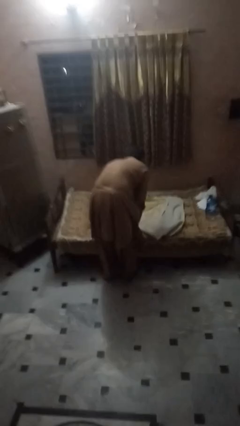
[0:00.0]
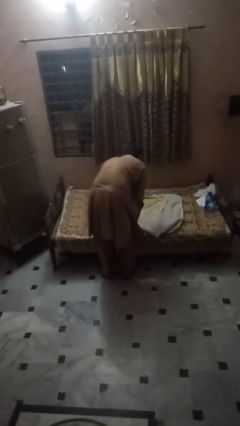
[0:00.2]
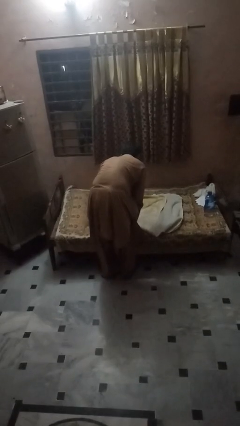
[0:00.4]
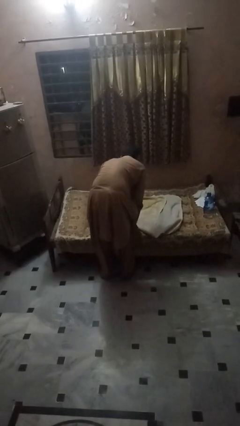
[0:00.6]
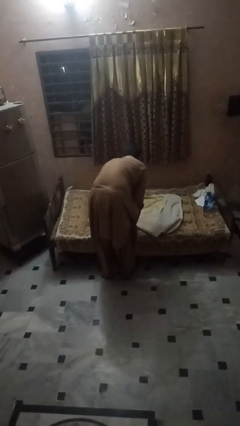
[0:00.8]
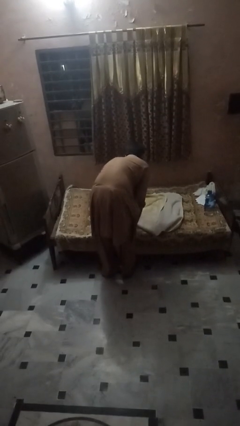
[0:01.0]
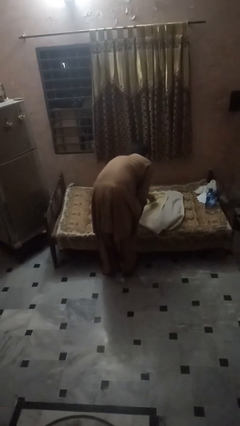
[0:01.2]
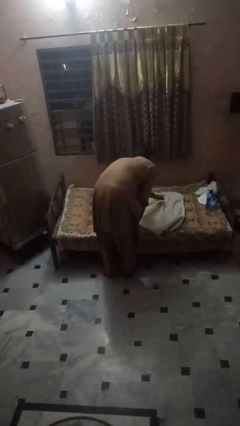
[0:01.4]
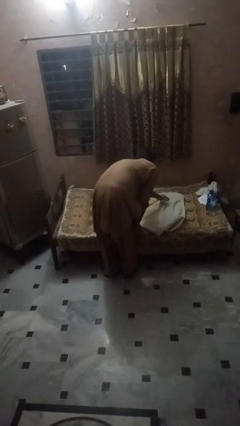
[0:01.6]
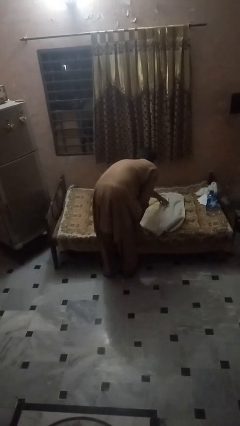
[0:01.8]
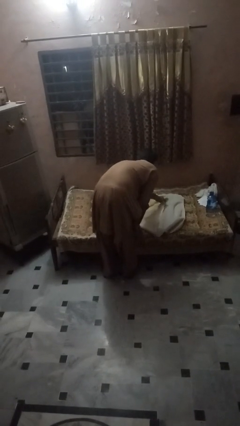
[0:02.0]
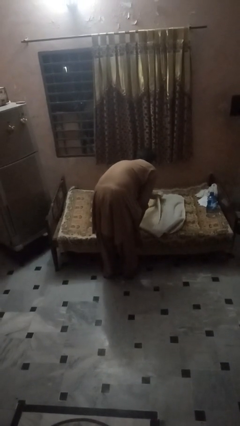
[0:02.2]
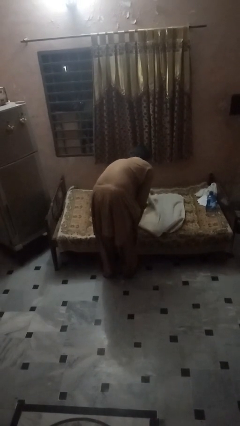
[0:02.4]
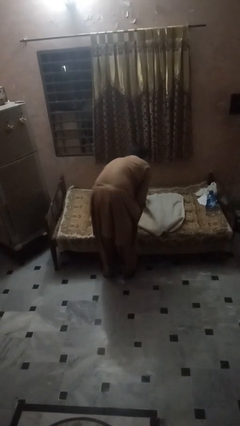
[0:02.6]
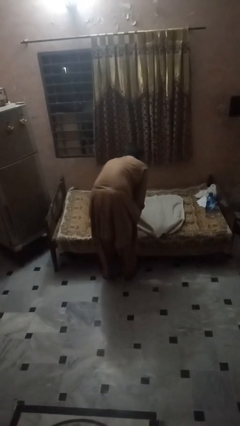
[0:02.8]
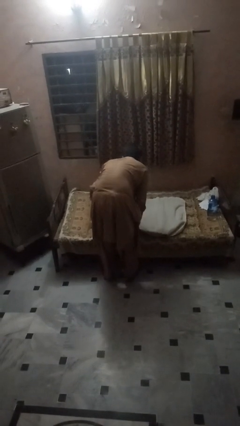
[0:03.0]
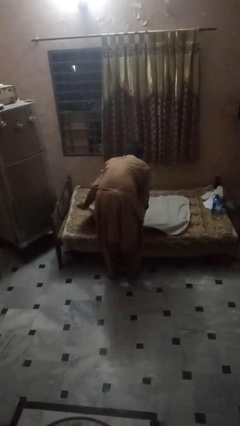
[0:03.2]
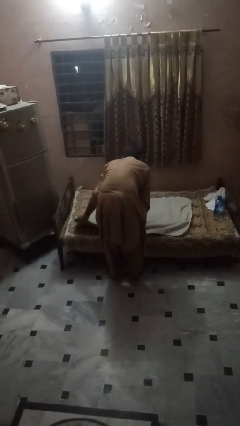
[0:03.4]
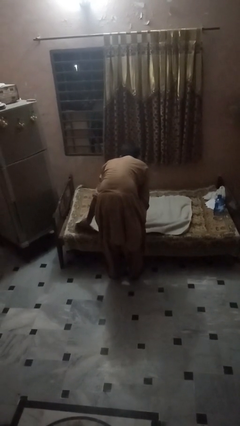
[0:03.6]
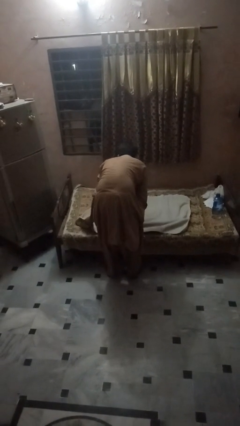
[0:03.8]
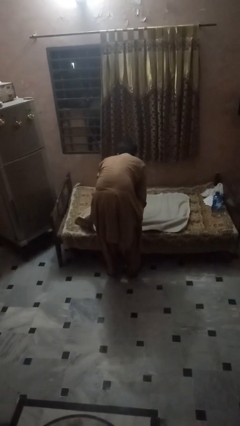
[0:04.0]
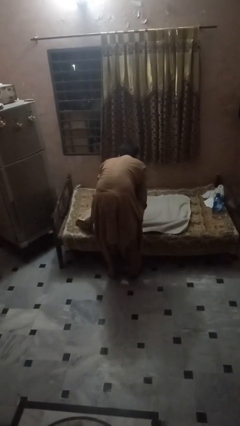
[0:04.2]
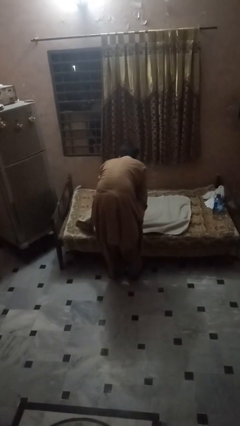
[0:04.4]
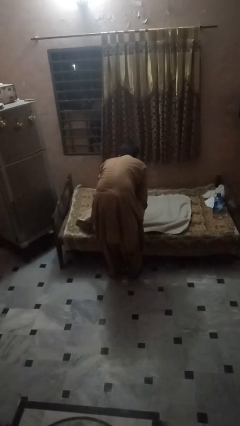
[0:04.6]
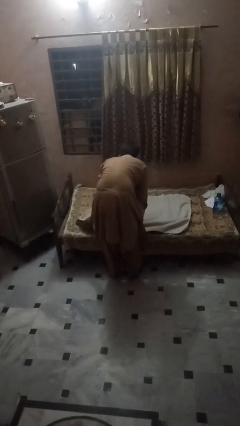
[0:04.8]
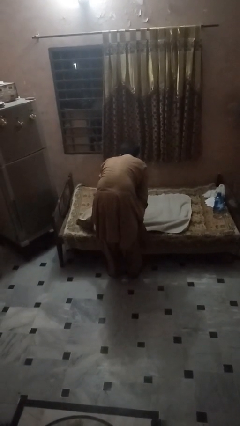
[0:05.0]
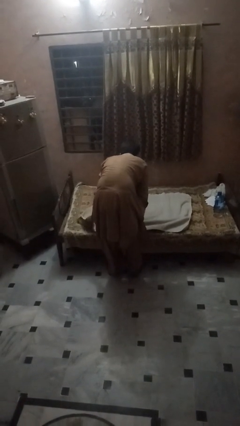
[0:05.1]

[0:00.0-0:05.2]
person unfolds blanket

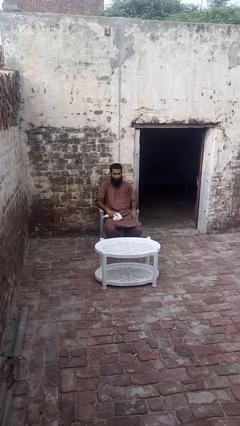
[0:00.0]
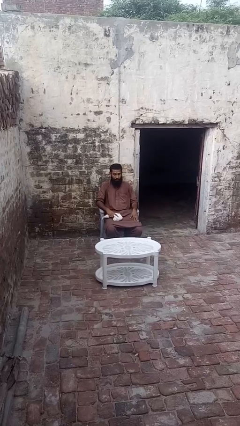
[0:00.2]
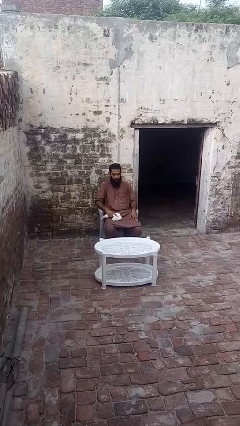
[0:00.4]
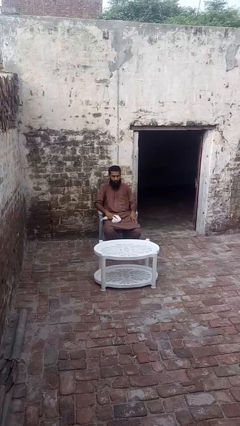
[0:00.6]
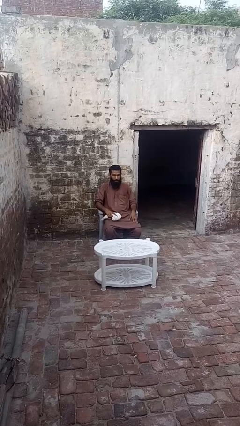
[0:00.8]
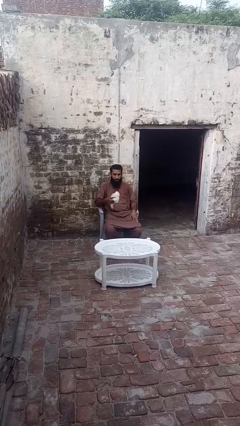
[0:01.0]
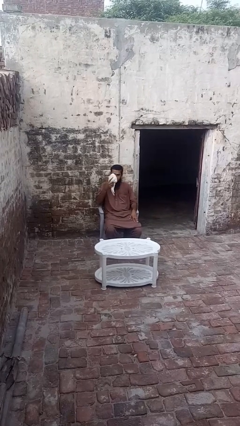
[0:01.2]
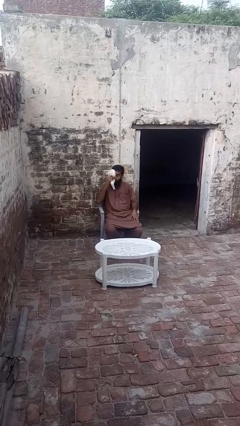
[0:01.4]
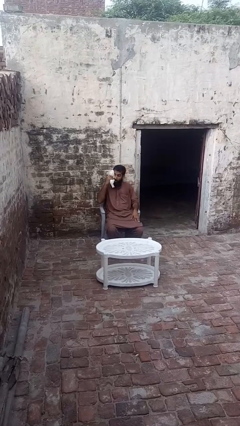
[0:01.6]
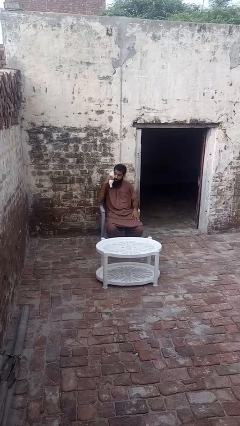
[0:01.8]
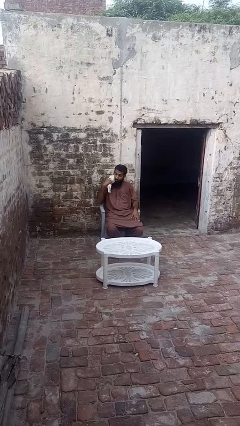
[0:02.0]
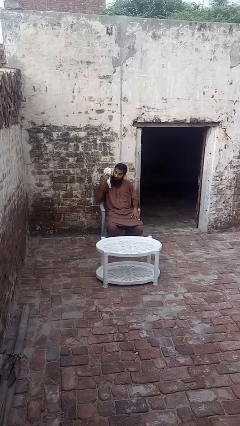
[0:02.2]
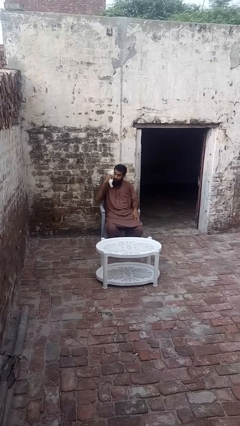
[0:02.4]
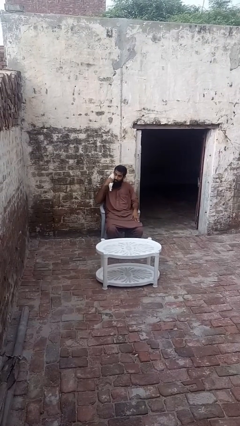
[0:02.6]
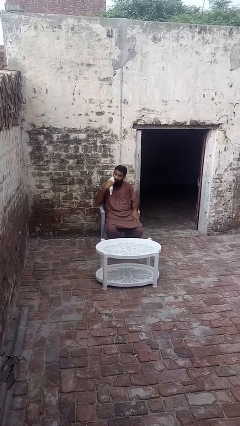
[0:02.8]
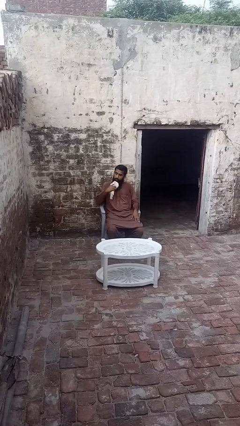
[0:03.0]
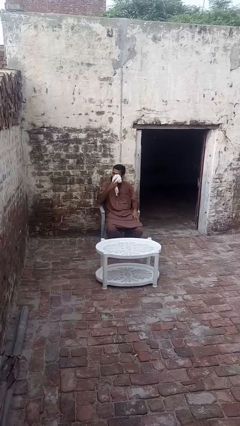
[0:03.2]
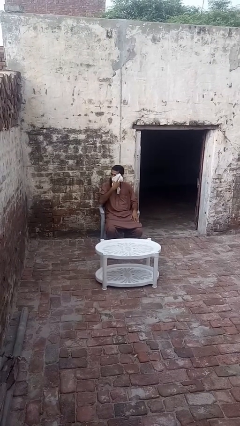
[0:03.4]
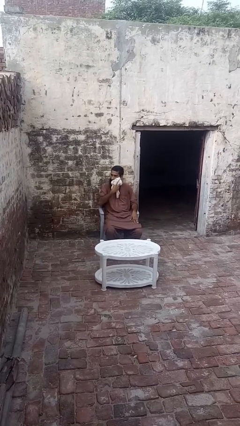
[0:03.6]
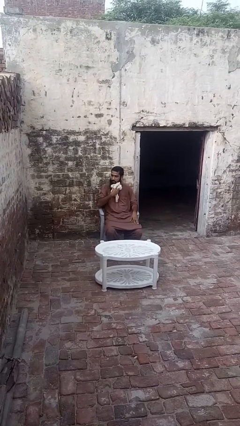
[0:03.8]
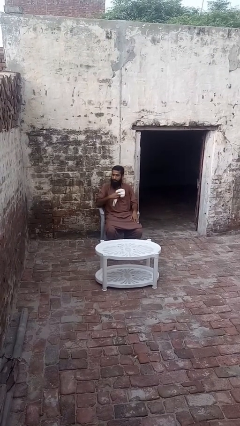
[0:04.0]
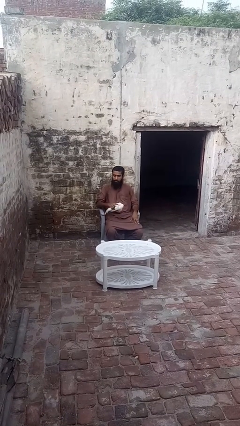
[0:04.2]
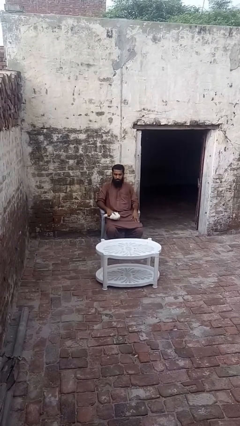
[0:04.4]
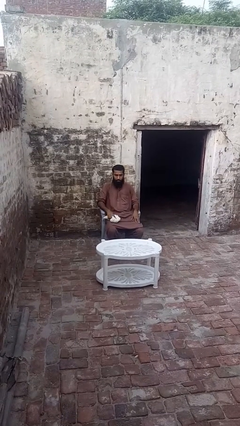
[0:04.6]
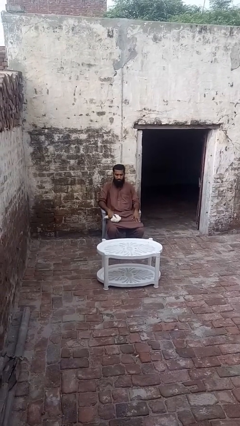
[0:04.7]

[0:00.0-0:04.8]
person wipes mouth with napkin

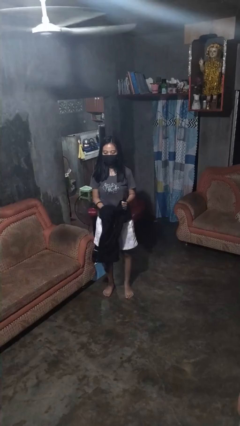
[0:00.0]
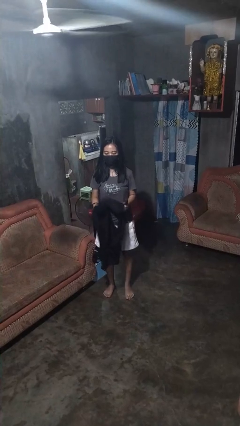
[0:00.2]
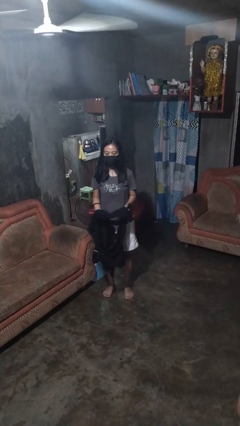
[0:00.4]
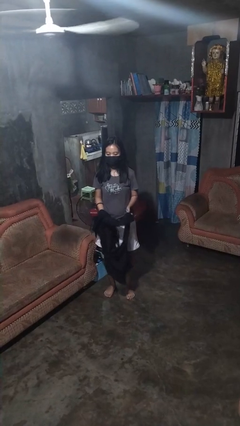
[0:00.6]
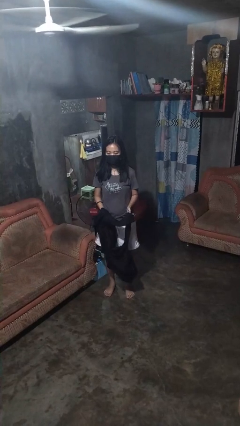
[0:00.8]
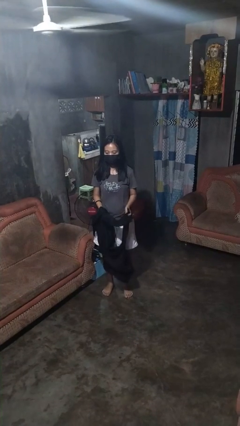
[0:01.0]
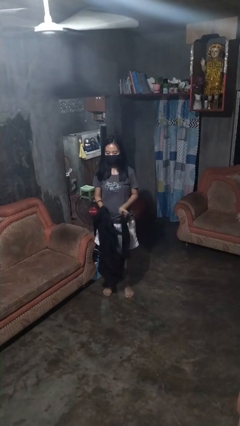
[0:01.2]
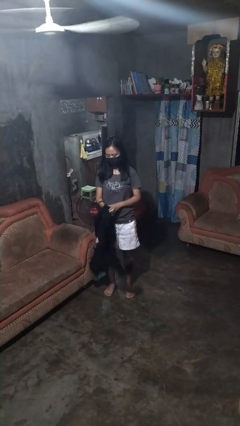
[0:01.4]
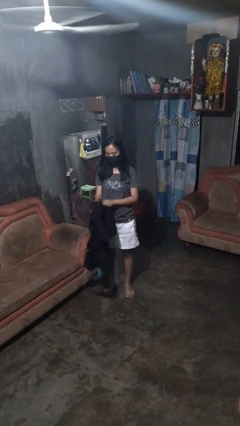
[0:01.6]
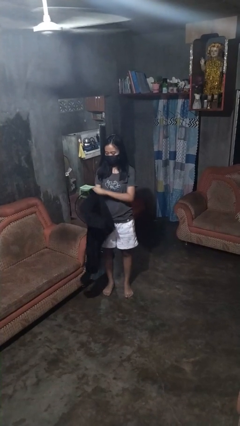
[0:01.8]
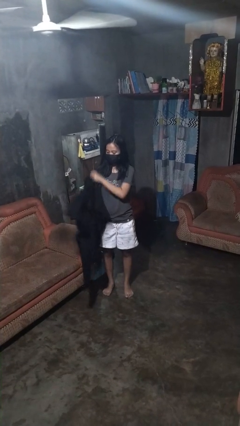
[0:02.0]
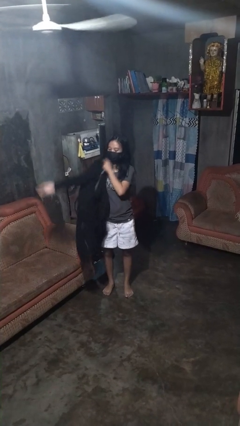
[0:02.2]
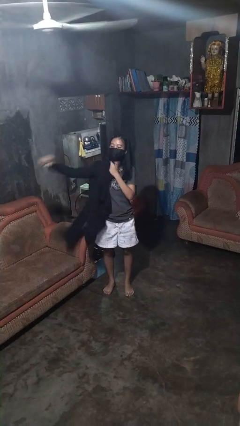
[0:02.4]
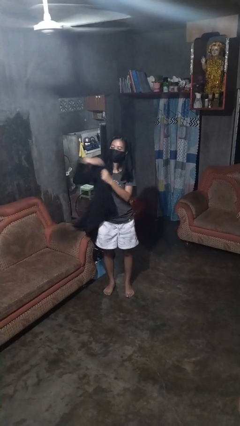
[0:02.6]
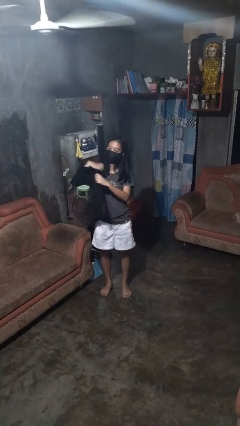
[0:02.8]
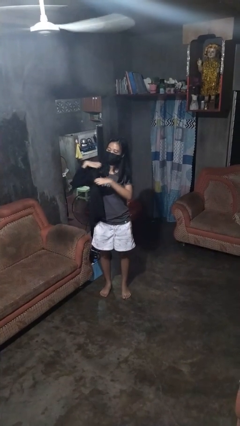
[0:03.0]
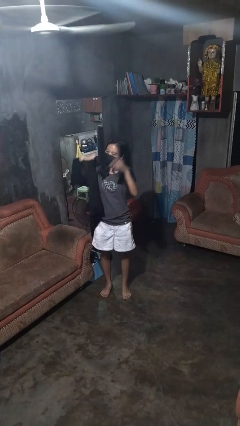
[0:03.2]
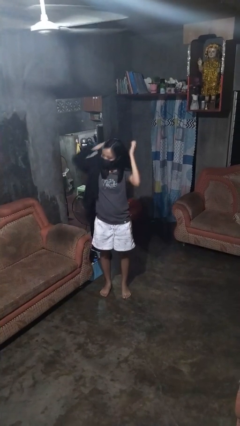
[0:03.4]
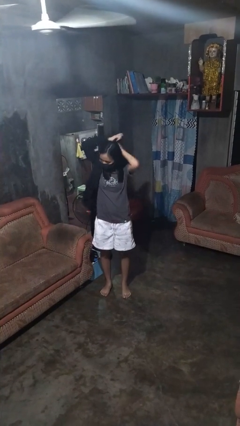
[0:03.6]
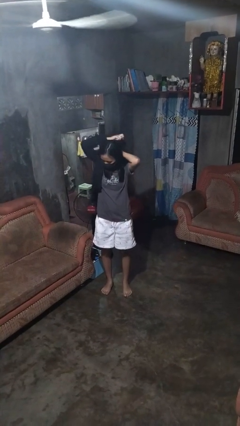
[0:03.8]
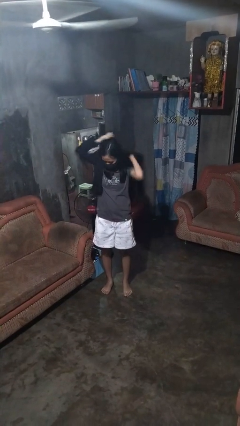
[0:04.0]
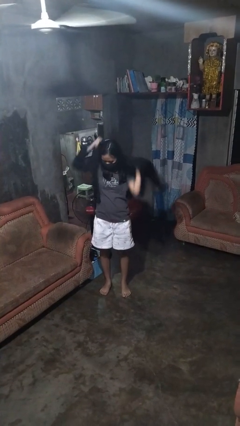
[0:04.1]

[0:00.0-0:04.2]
person puts on shirt

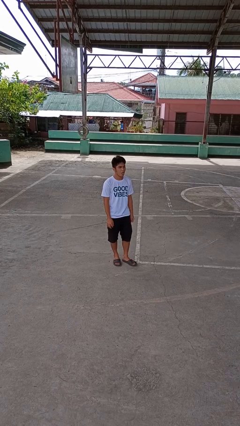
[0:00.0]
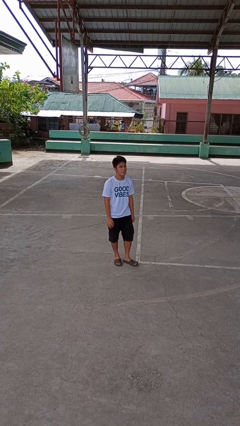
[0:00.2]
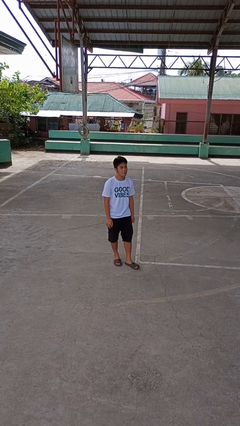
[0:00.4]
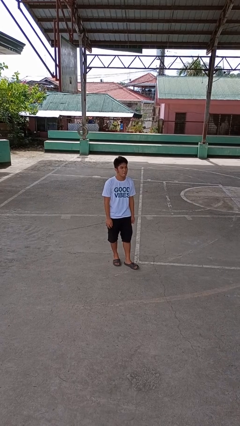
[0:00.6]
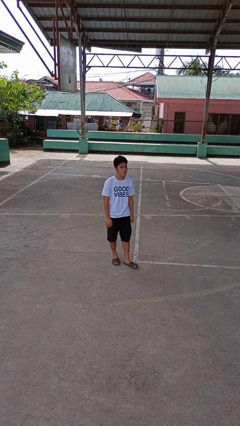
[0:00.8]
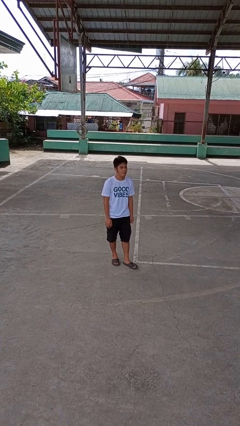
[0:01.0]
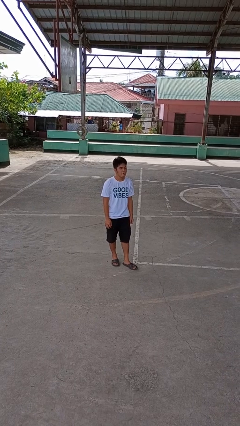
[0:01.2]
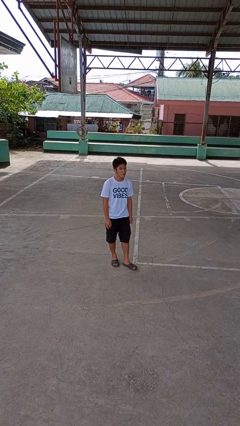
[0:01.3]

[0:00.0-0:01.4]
person sticks out tongue

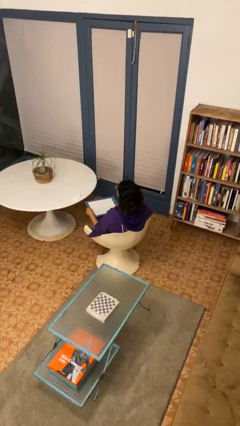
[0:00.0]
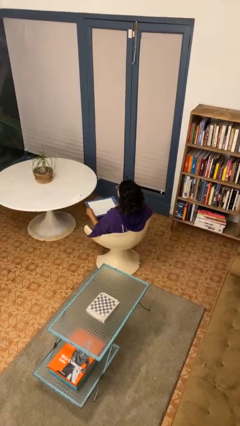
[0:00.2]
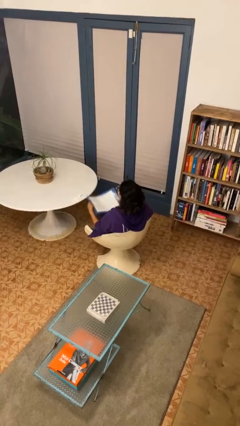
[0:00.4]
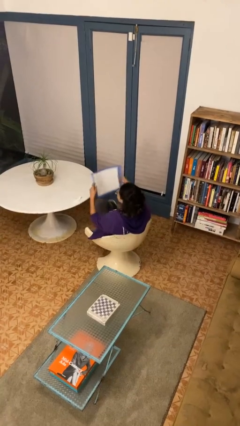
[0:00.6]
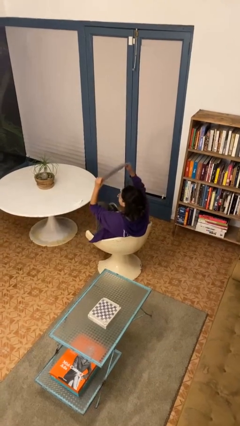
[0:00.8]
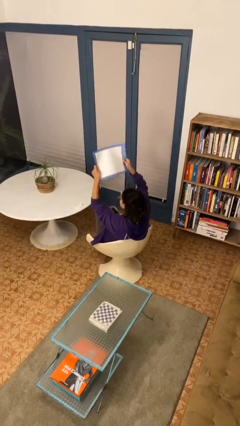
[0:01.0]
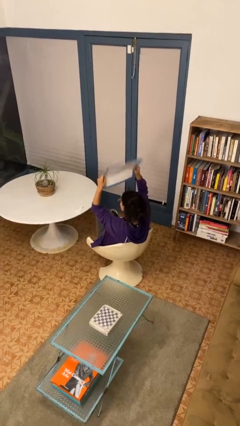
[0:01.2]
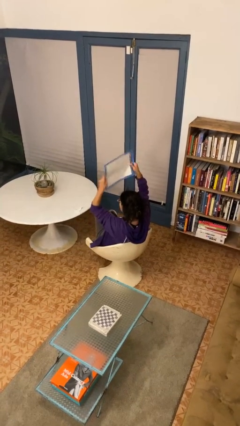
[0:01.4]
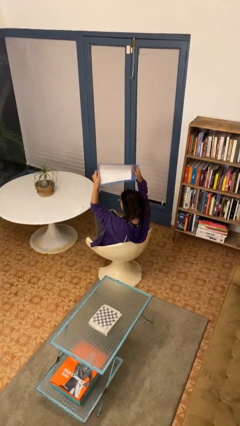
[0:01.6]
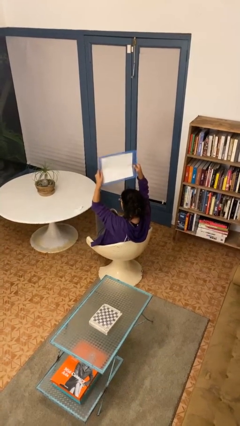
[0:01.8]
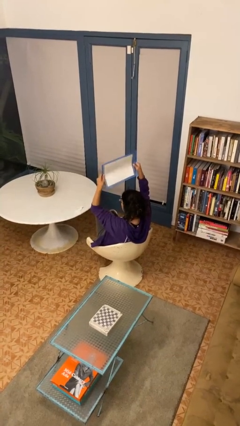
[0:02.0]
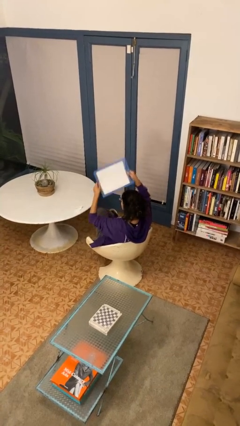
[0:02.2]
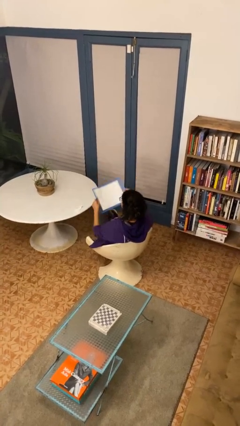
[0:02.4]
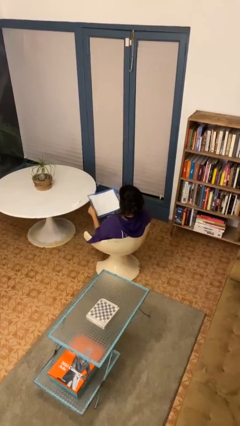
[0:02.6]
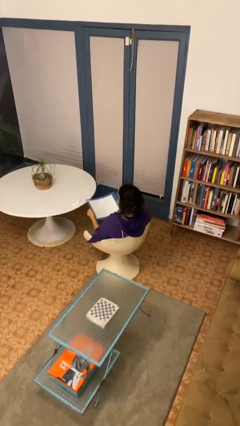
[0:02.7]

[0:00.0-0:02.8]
person holds object above head
